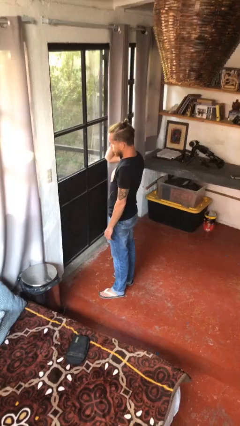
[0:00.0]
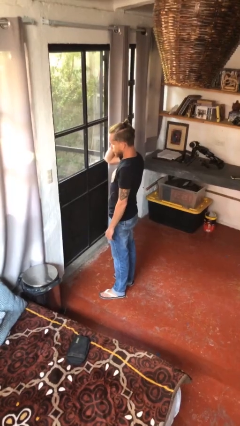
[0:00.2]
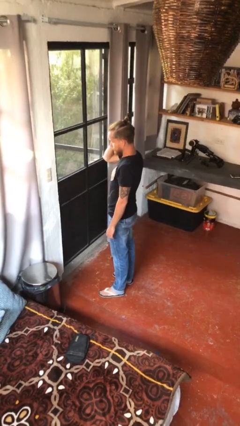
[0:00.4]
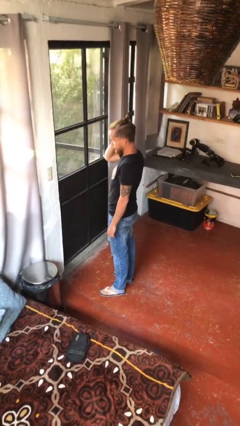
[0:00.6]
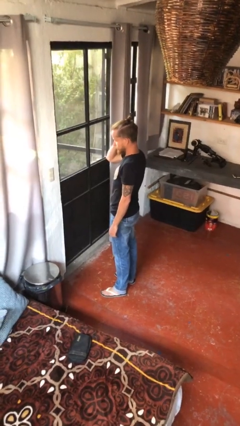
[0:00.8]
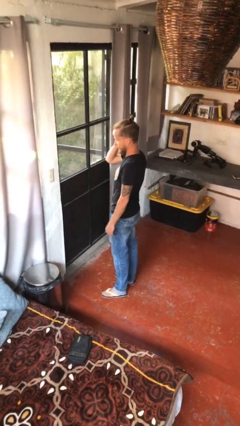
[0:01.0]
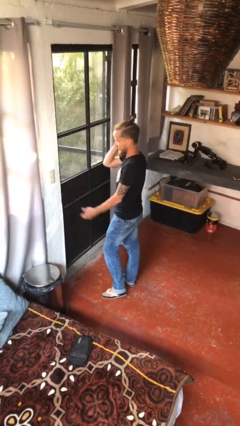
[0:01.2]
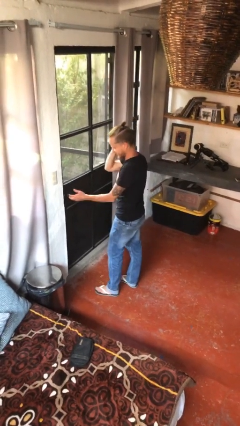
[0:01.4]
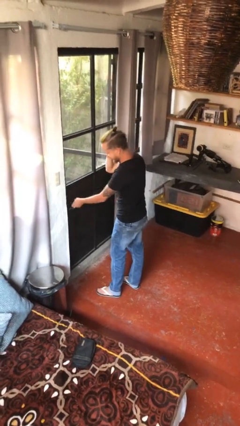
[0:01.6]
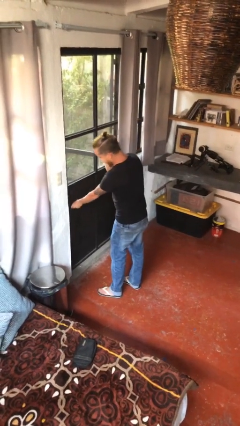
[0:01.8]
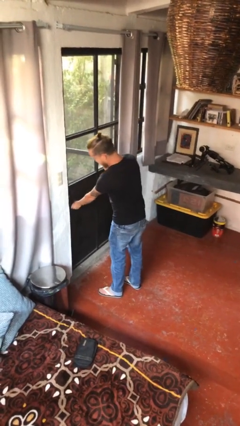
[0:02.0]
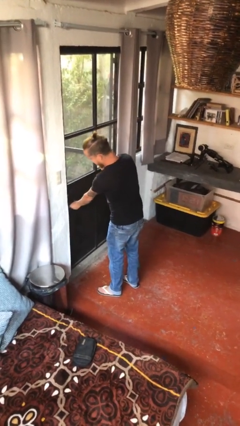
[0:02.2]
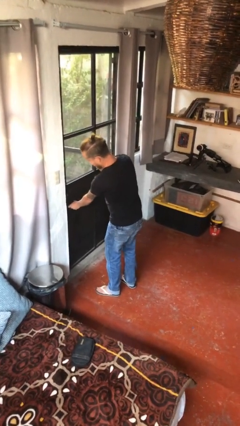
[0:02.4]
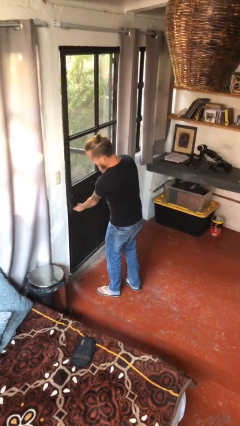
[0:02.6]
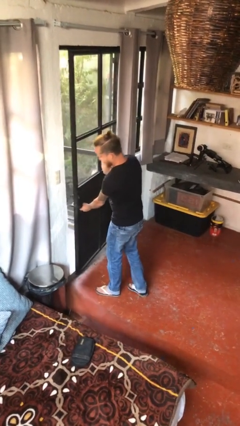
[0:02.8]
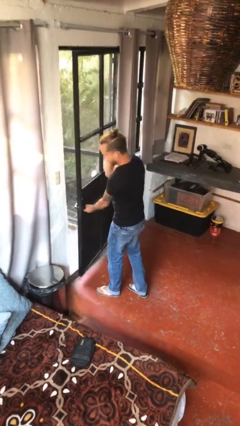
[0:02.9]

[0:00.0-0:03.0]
person opens facility door

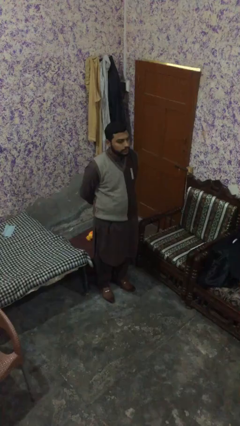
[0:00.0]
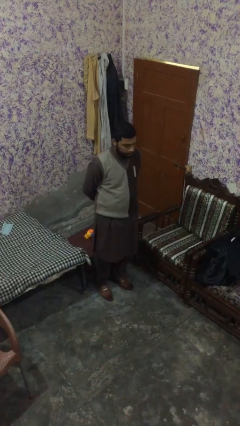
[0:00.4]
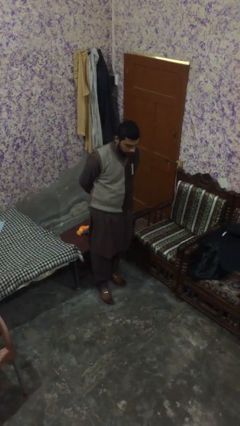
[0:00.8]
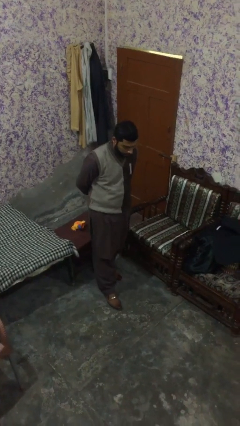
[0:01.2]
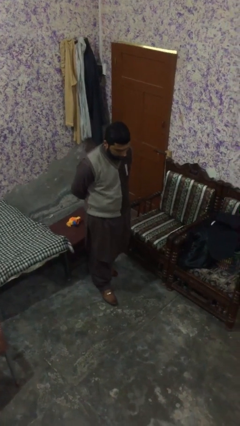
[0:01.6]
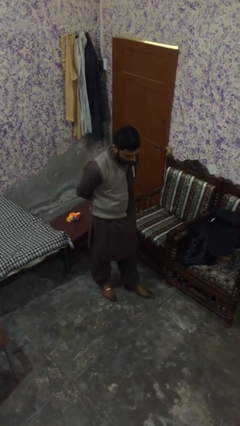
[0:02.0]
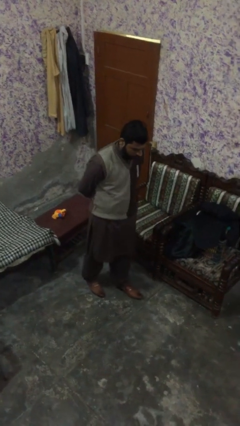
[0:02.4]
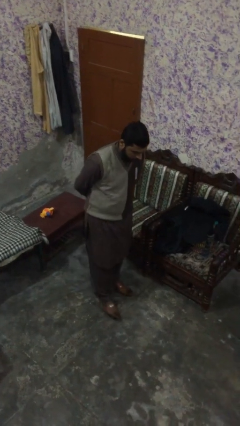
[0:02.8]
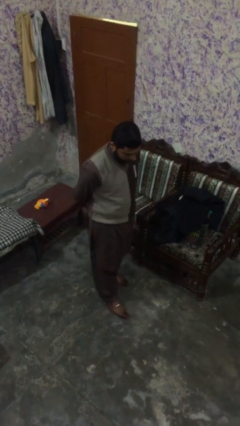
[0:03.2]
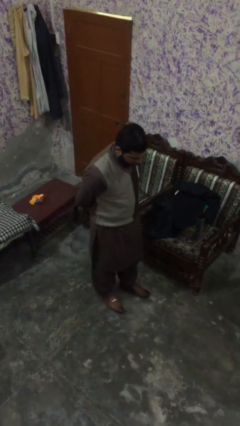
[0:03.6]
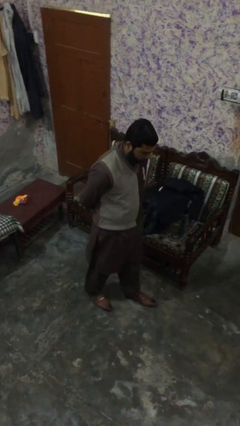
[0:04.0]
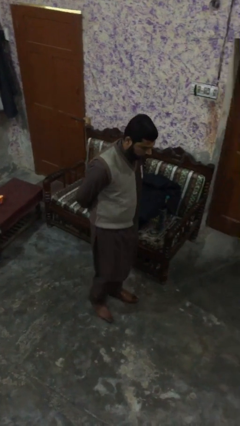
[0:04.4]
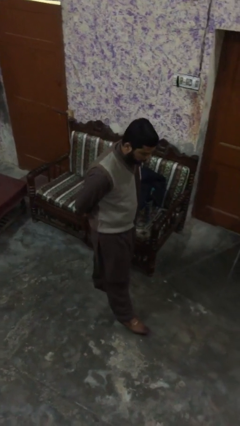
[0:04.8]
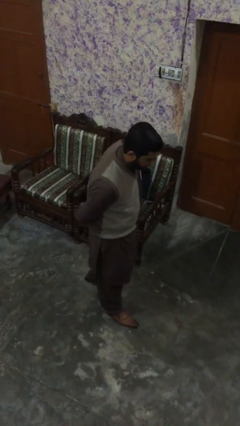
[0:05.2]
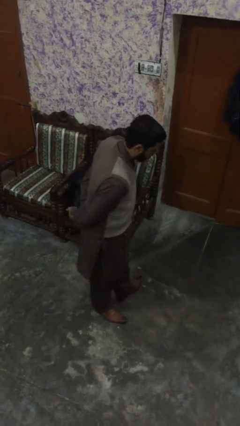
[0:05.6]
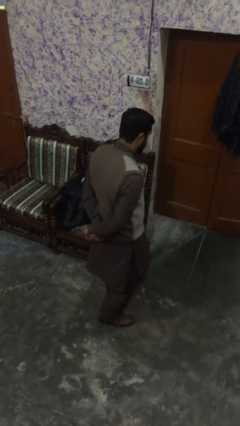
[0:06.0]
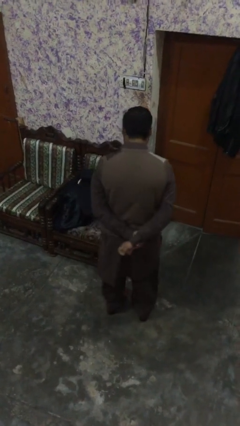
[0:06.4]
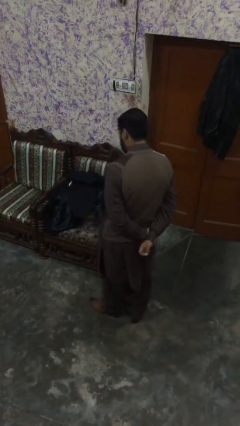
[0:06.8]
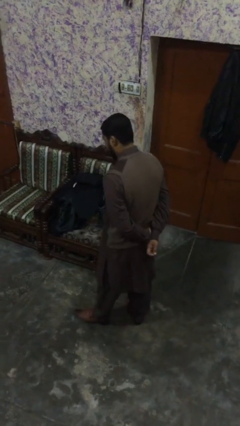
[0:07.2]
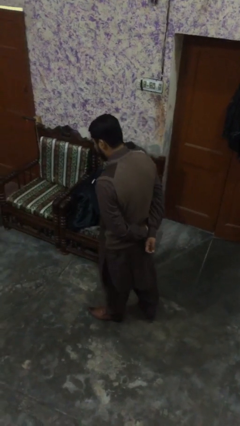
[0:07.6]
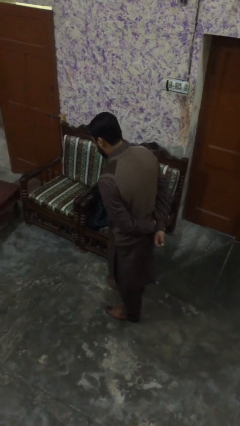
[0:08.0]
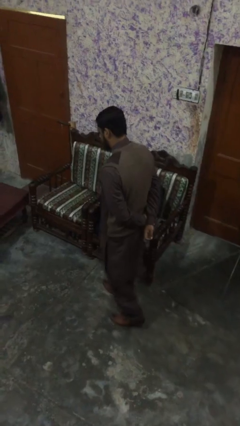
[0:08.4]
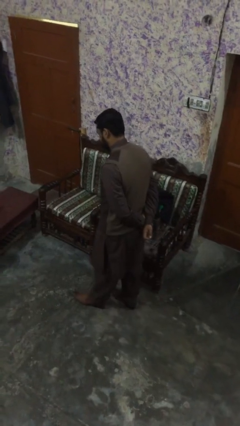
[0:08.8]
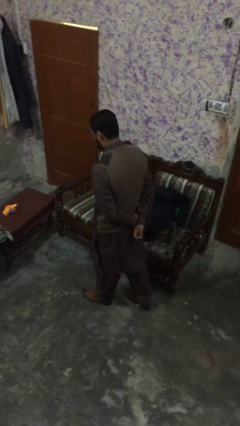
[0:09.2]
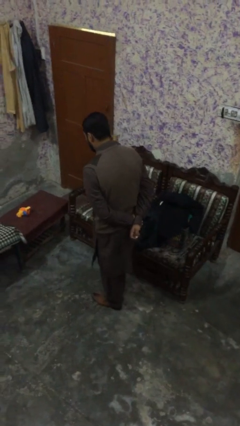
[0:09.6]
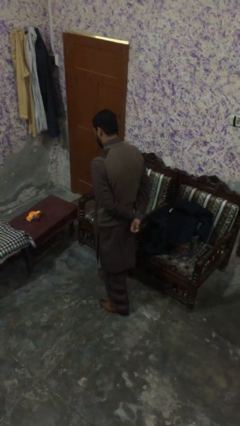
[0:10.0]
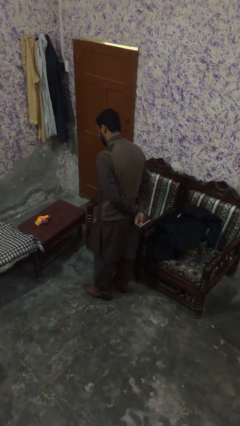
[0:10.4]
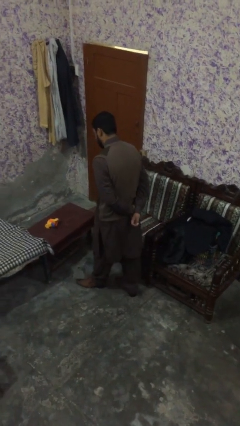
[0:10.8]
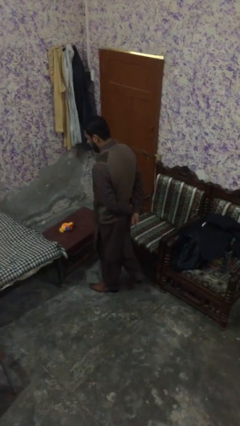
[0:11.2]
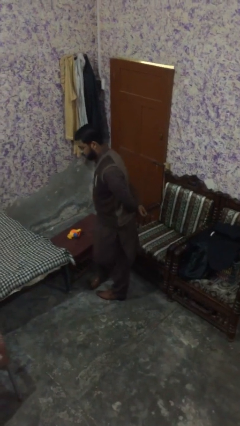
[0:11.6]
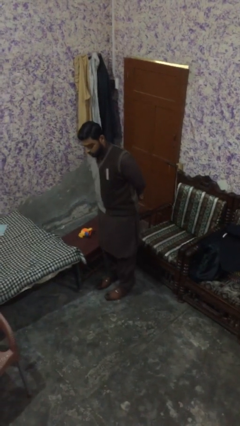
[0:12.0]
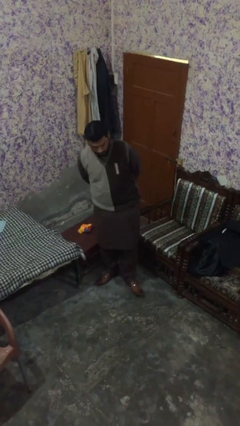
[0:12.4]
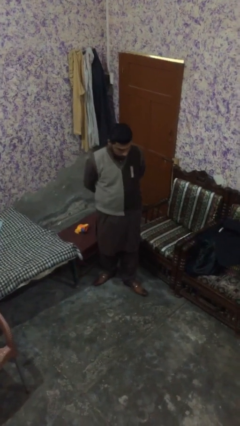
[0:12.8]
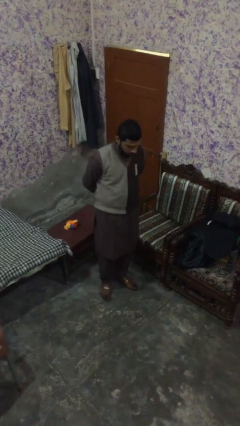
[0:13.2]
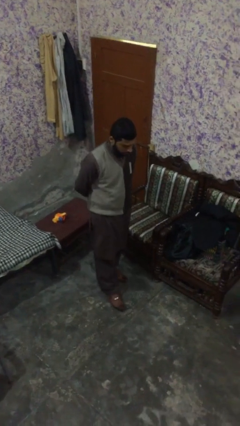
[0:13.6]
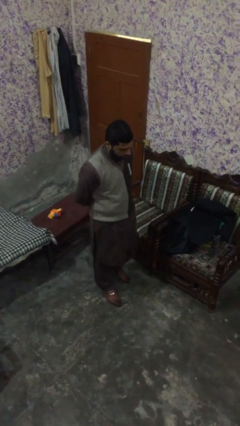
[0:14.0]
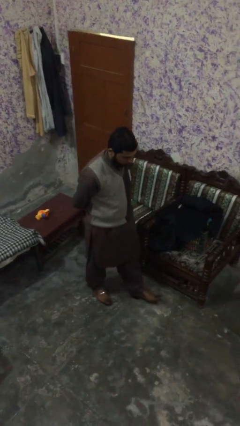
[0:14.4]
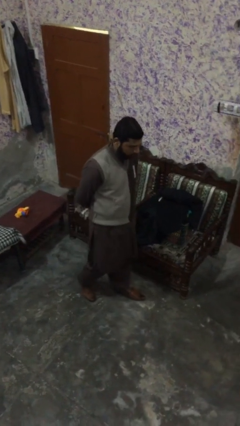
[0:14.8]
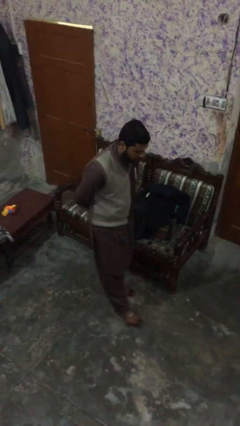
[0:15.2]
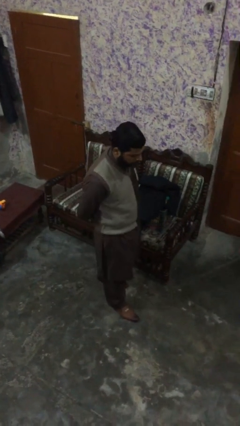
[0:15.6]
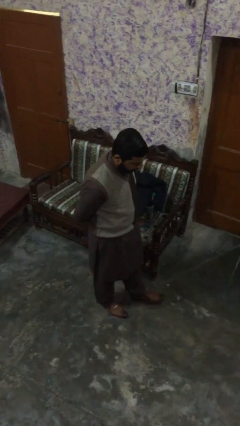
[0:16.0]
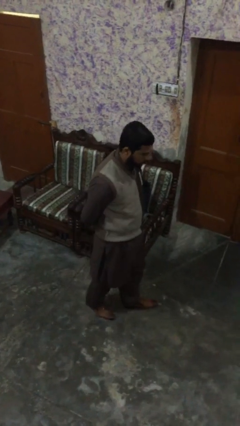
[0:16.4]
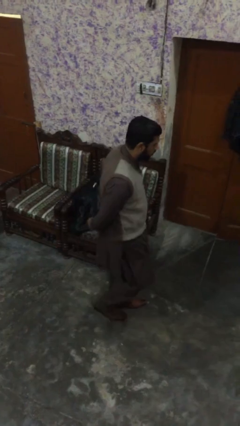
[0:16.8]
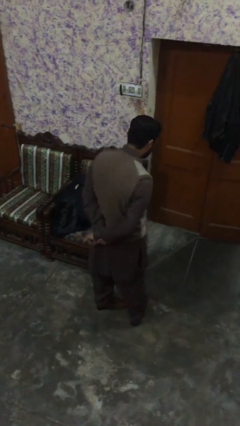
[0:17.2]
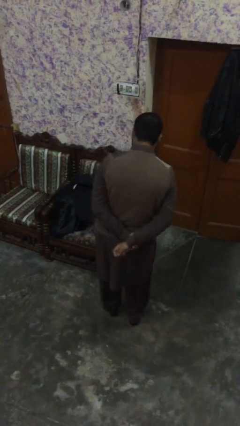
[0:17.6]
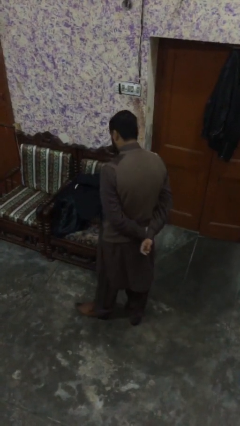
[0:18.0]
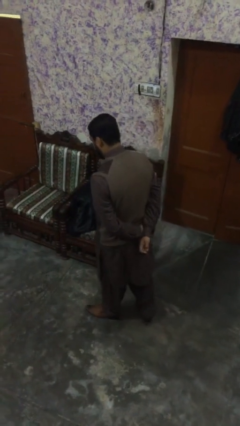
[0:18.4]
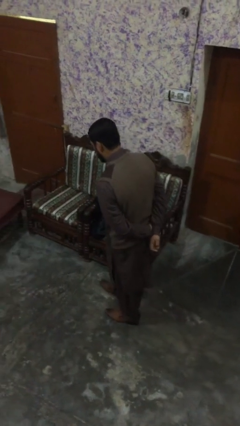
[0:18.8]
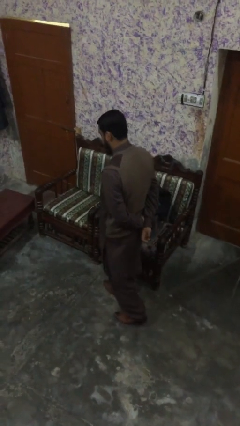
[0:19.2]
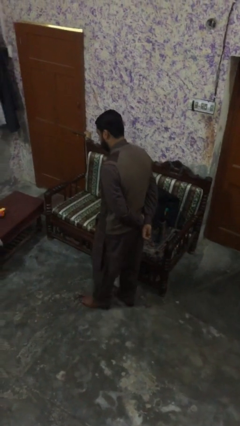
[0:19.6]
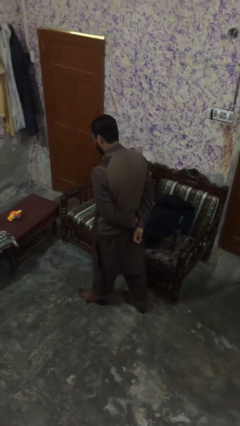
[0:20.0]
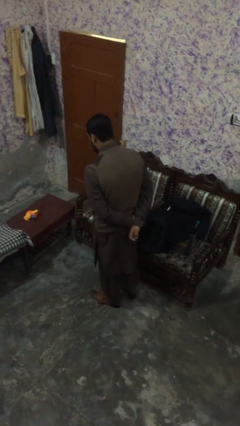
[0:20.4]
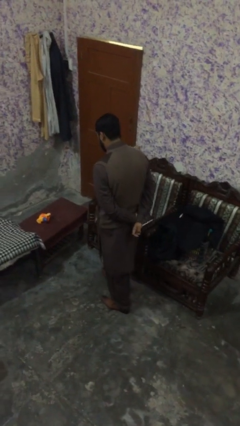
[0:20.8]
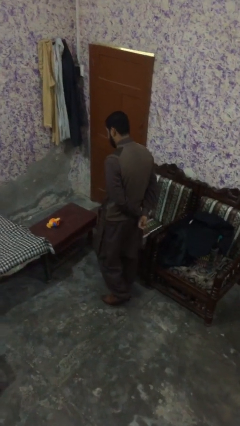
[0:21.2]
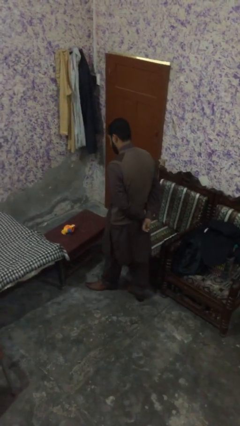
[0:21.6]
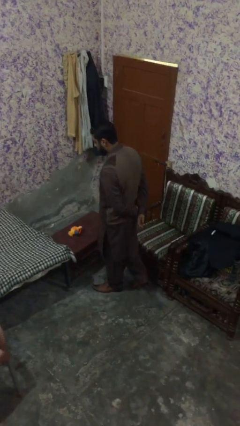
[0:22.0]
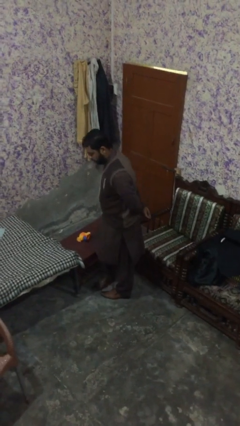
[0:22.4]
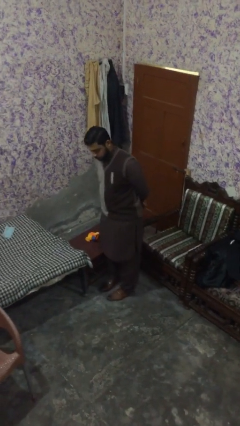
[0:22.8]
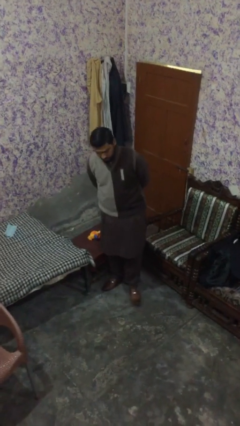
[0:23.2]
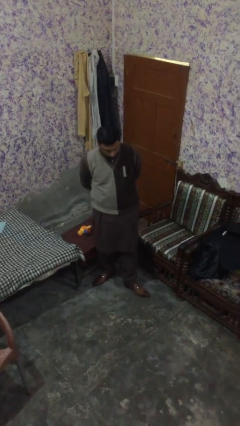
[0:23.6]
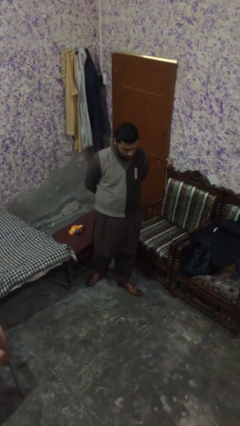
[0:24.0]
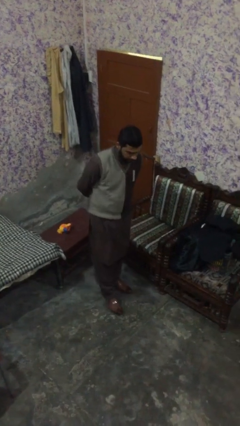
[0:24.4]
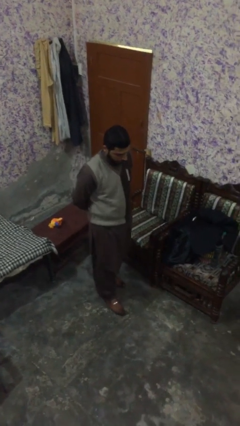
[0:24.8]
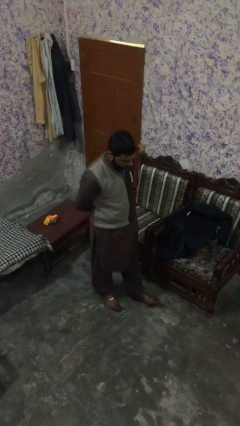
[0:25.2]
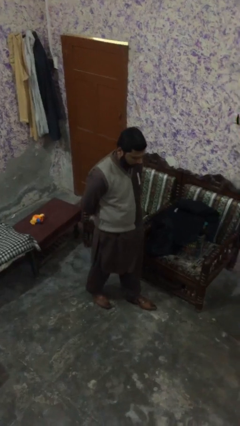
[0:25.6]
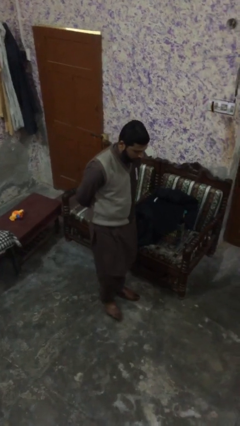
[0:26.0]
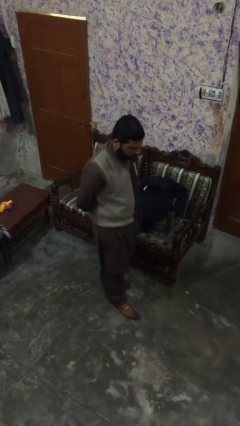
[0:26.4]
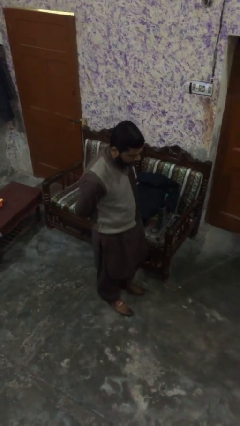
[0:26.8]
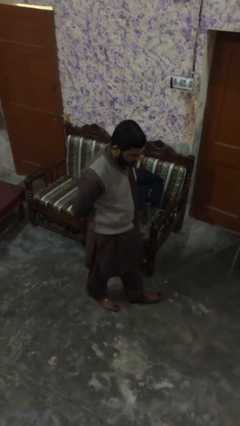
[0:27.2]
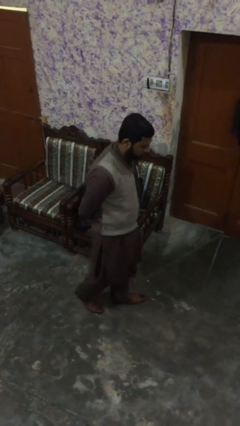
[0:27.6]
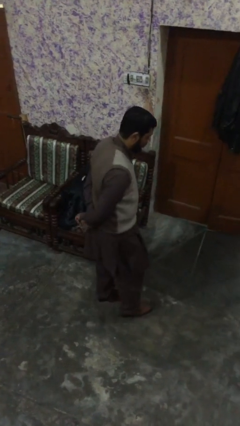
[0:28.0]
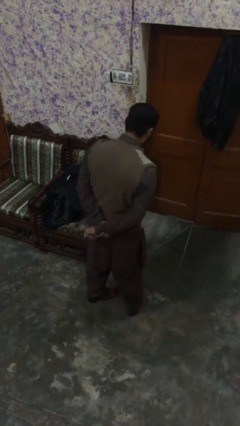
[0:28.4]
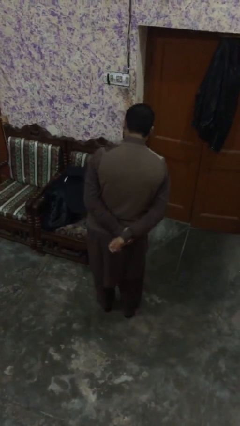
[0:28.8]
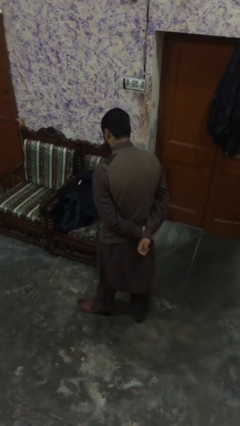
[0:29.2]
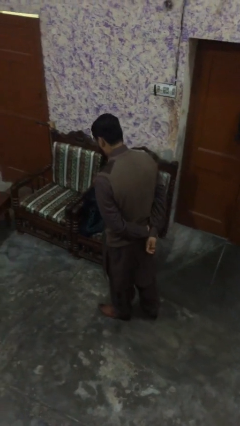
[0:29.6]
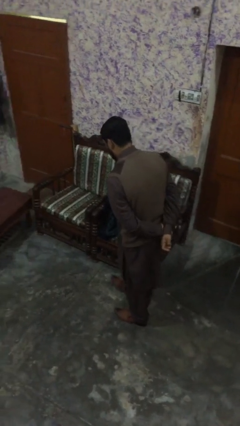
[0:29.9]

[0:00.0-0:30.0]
person walks
